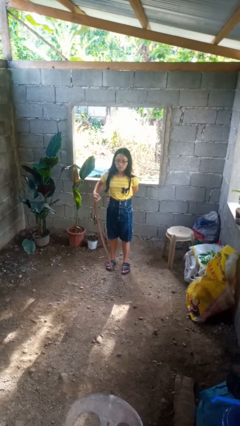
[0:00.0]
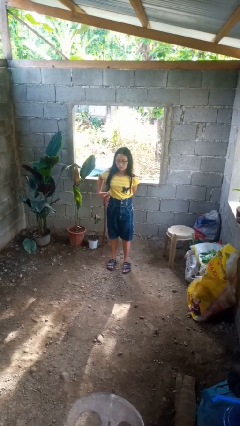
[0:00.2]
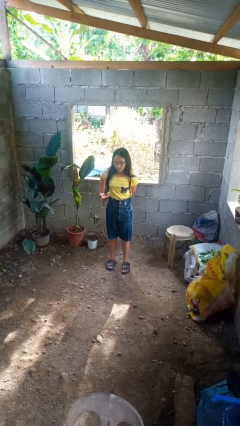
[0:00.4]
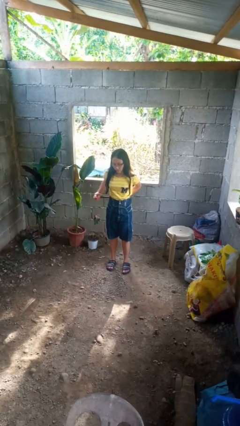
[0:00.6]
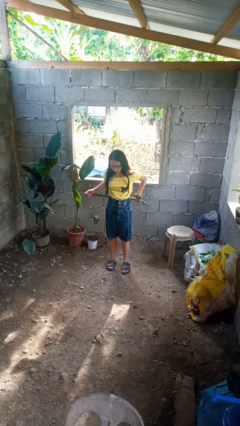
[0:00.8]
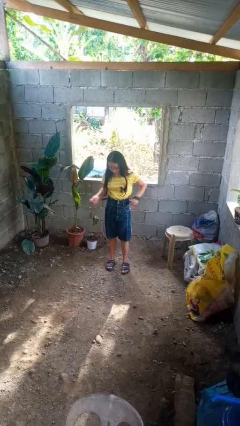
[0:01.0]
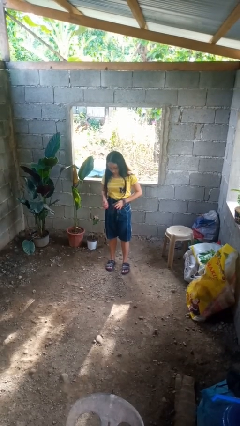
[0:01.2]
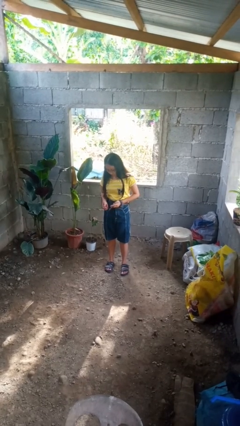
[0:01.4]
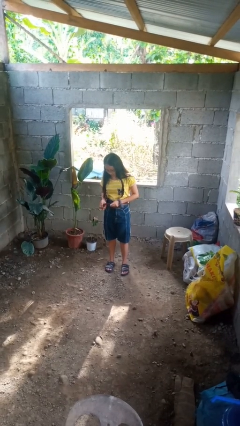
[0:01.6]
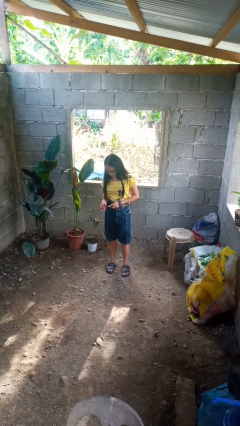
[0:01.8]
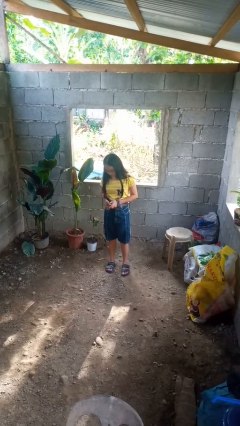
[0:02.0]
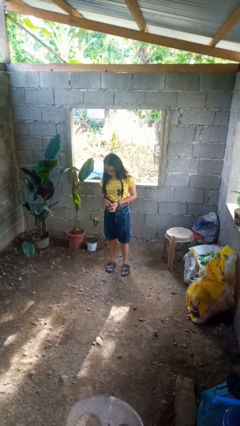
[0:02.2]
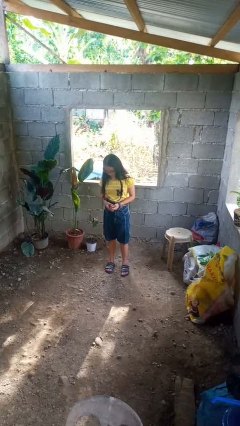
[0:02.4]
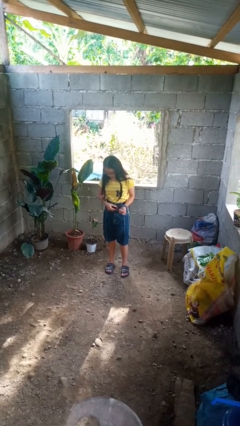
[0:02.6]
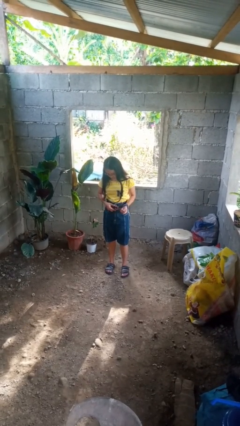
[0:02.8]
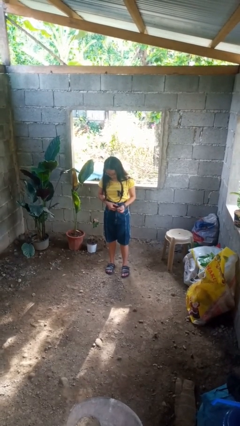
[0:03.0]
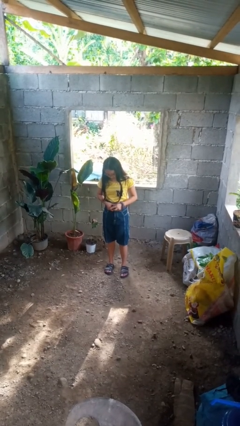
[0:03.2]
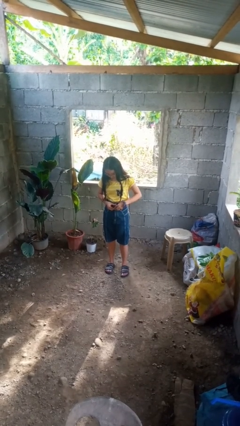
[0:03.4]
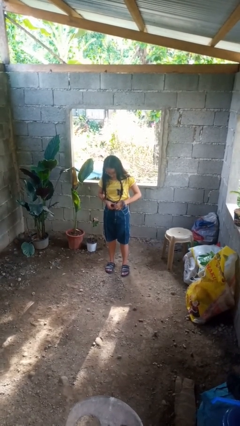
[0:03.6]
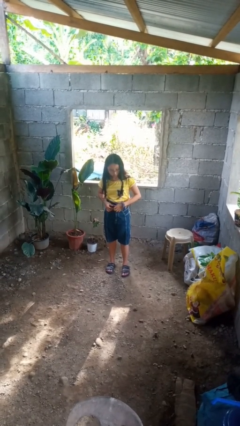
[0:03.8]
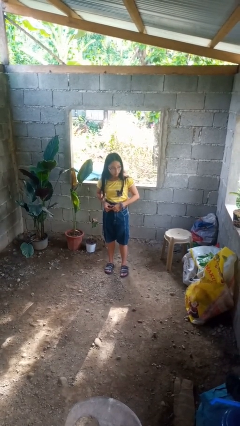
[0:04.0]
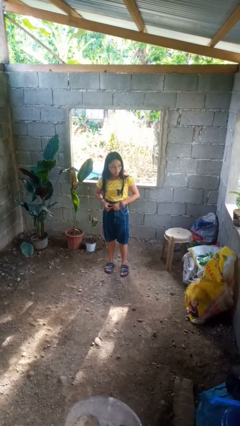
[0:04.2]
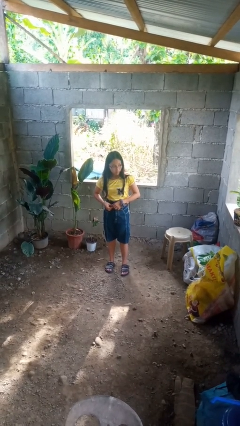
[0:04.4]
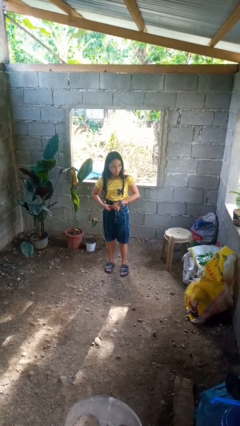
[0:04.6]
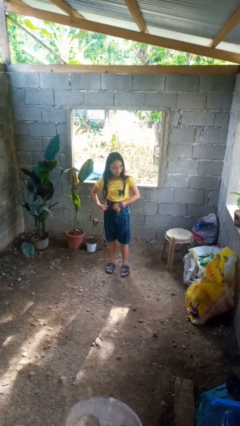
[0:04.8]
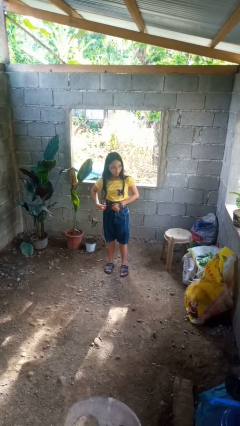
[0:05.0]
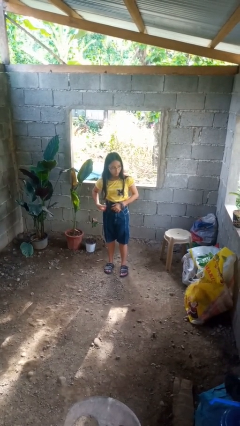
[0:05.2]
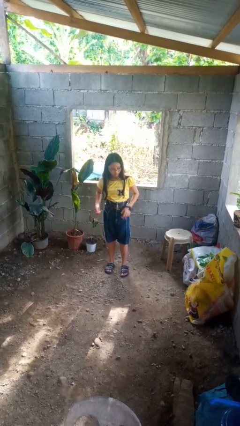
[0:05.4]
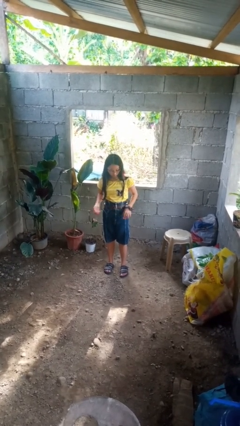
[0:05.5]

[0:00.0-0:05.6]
person puts on belt

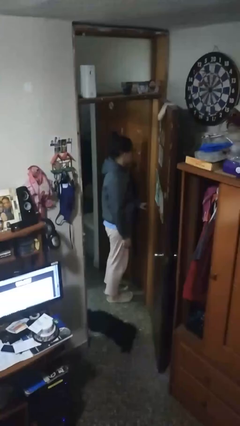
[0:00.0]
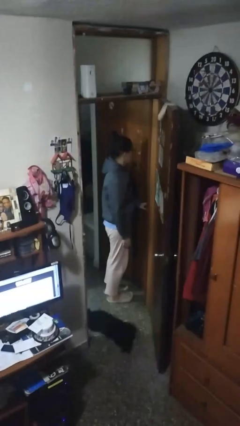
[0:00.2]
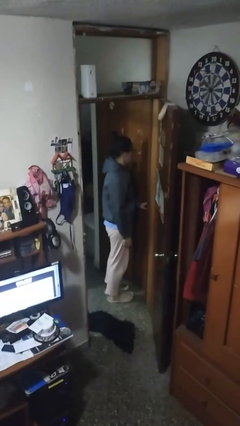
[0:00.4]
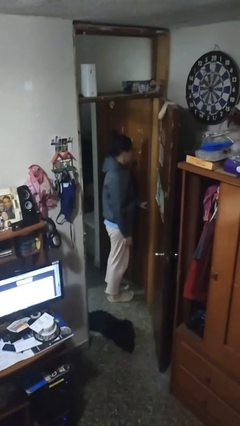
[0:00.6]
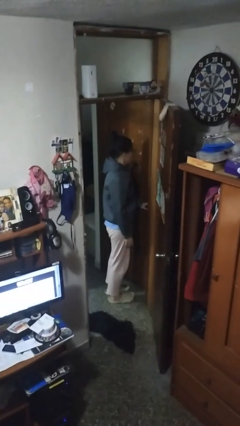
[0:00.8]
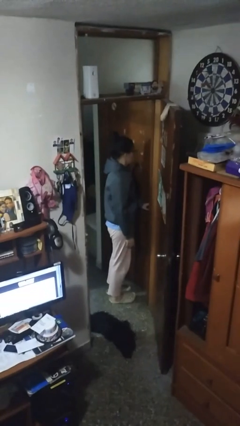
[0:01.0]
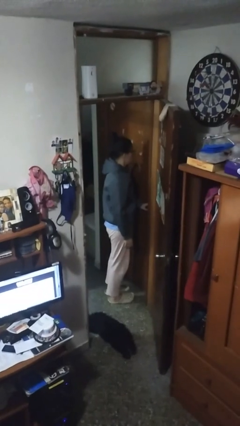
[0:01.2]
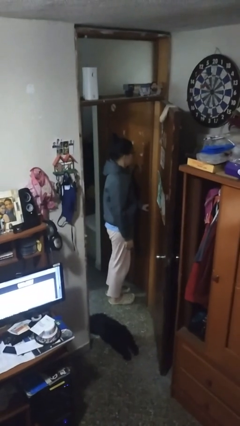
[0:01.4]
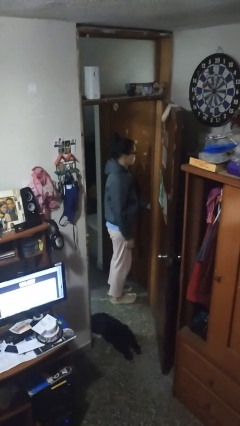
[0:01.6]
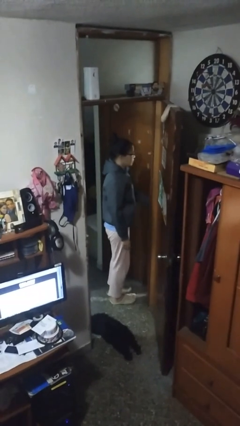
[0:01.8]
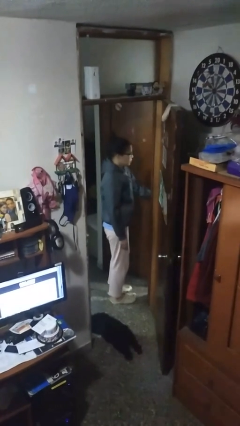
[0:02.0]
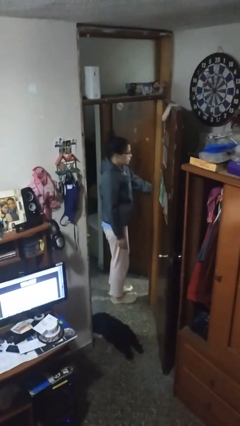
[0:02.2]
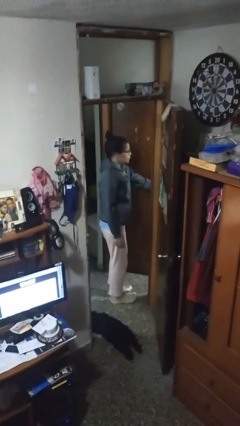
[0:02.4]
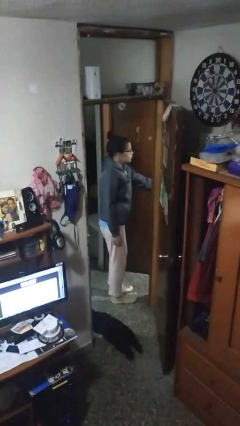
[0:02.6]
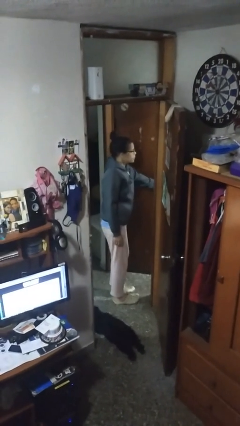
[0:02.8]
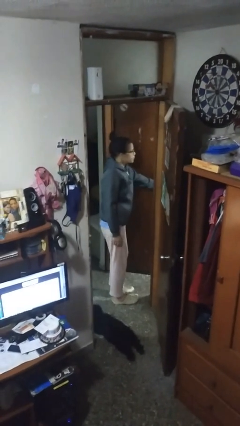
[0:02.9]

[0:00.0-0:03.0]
person opens facility door

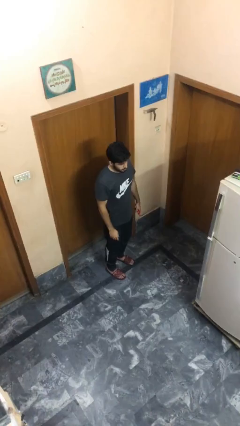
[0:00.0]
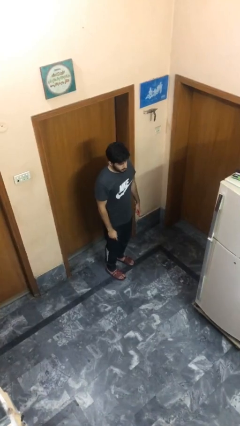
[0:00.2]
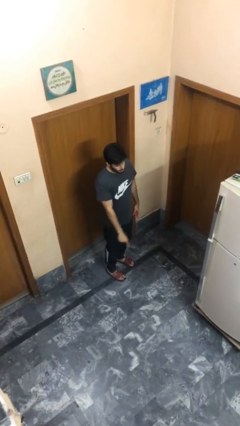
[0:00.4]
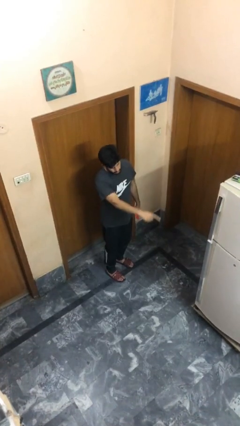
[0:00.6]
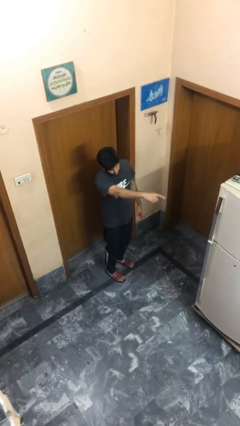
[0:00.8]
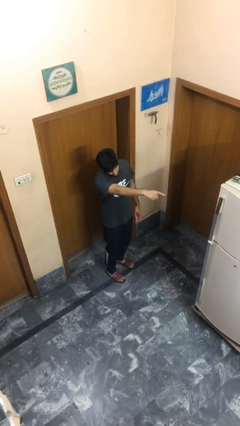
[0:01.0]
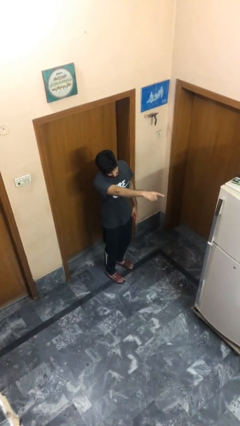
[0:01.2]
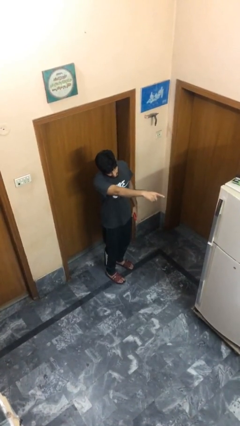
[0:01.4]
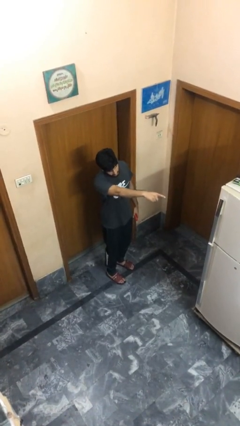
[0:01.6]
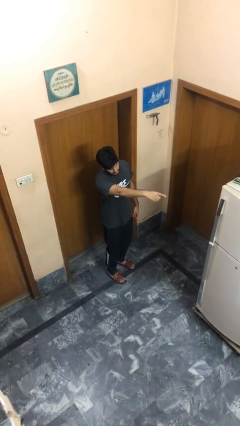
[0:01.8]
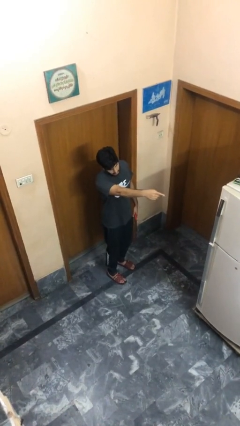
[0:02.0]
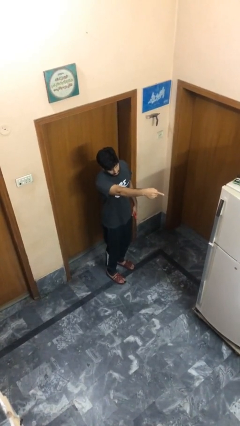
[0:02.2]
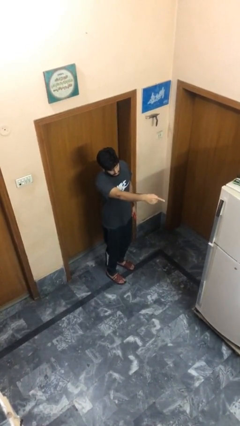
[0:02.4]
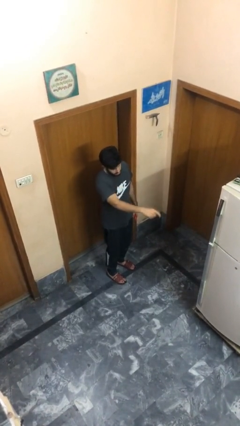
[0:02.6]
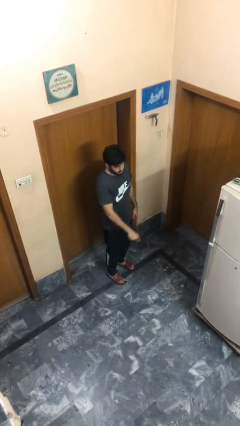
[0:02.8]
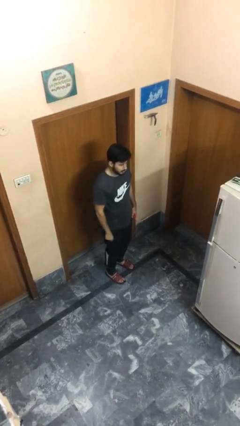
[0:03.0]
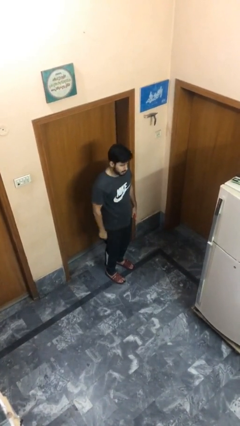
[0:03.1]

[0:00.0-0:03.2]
person points at person

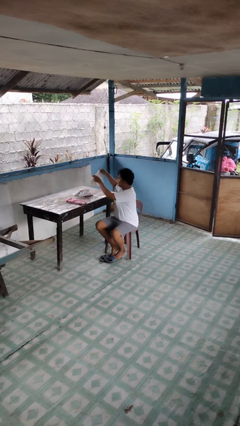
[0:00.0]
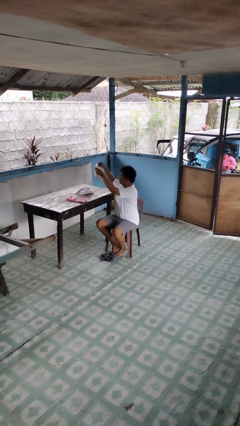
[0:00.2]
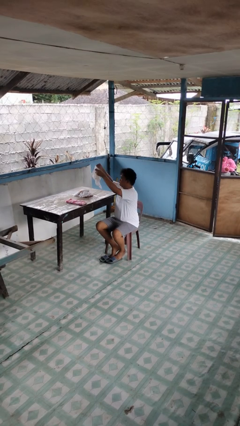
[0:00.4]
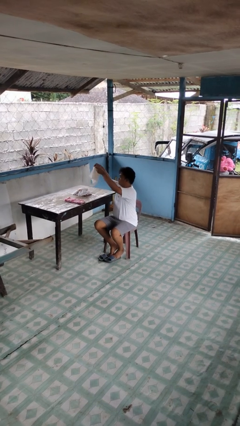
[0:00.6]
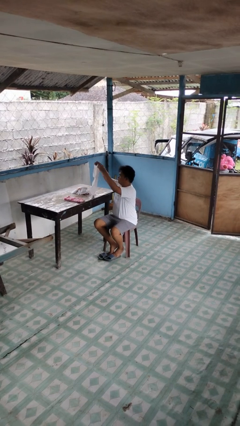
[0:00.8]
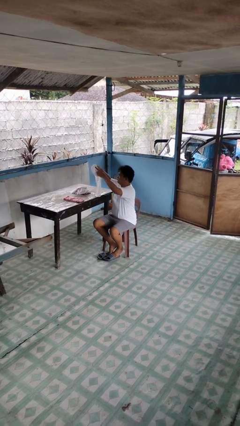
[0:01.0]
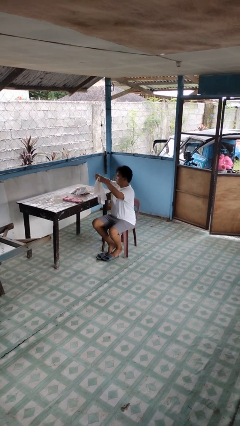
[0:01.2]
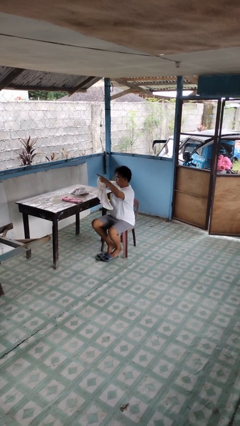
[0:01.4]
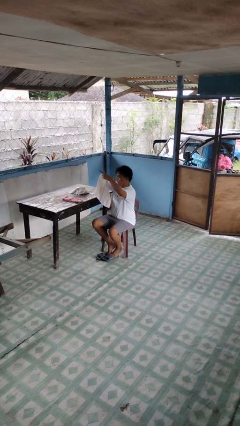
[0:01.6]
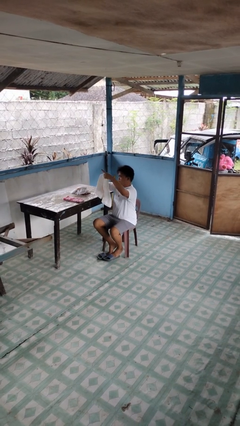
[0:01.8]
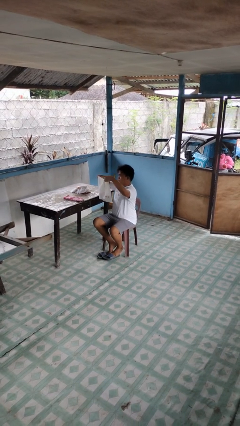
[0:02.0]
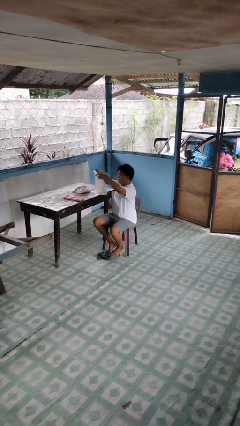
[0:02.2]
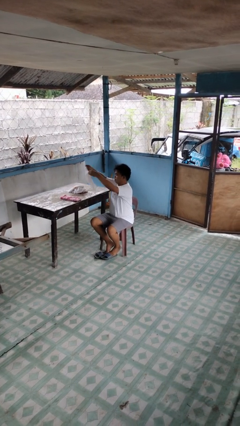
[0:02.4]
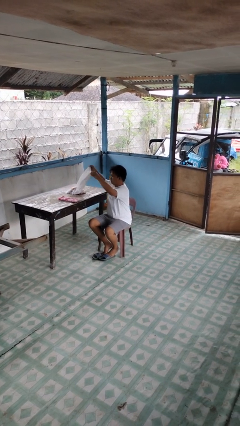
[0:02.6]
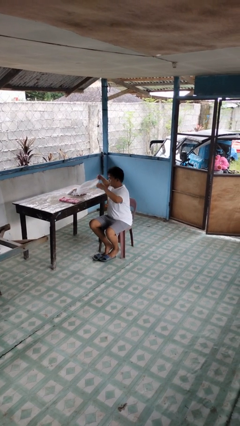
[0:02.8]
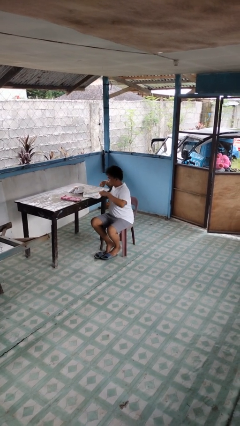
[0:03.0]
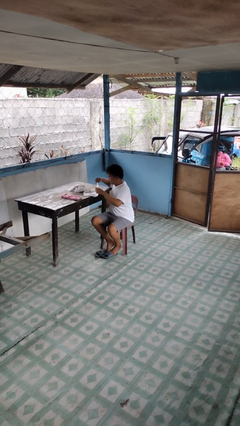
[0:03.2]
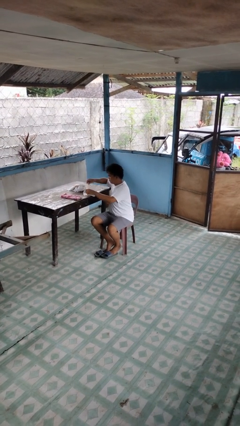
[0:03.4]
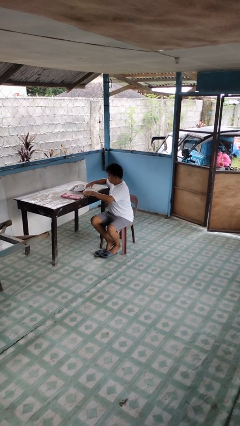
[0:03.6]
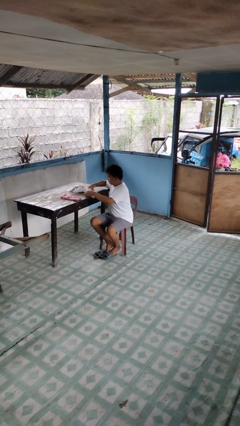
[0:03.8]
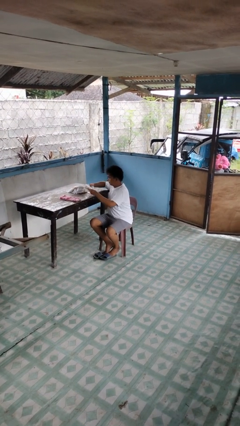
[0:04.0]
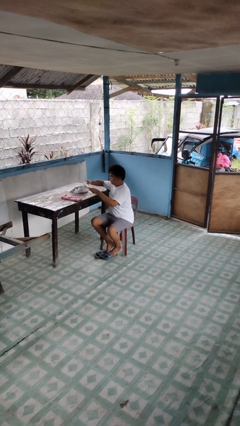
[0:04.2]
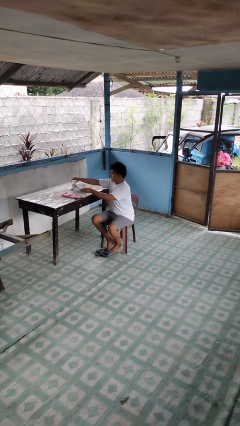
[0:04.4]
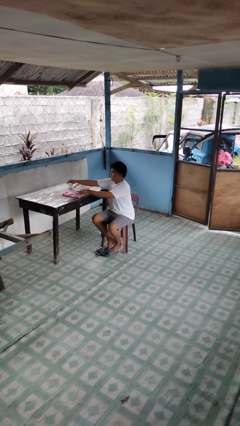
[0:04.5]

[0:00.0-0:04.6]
person folds towel

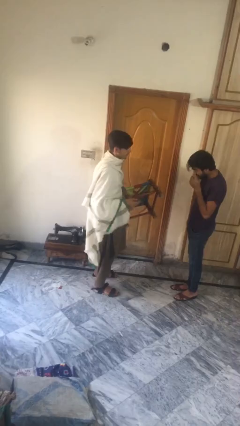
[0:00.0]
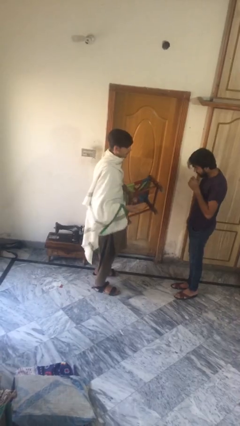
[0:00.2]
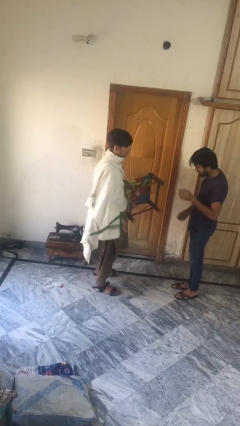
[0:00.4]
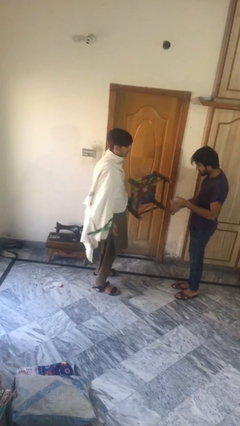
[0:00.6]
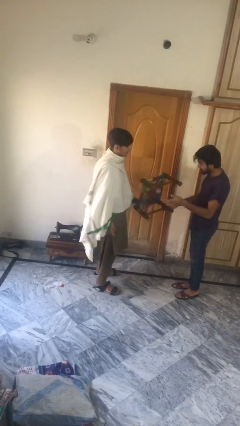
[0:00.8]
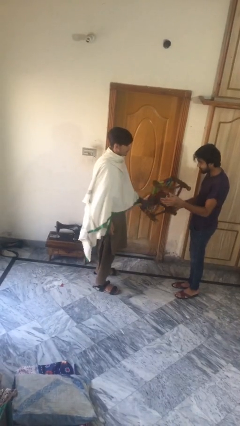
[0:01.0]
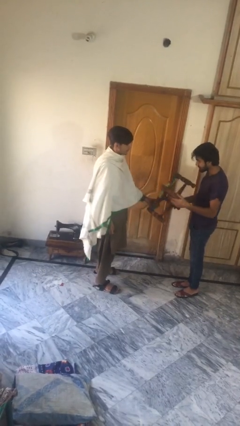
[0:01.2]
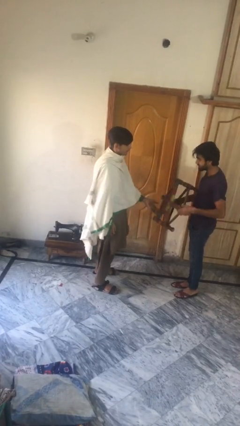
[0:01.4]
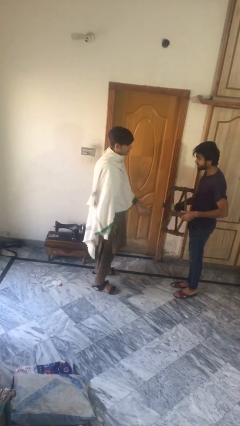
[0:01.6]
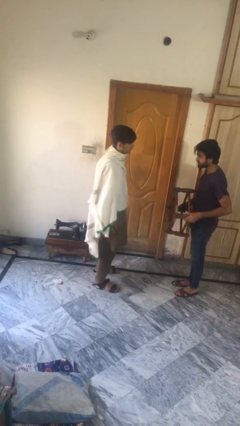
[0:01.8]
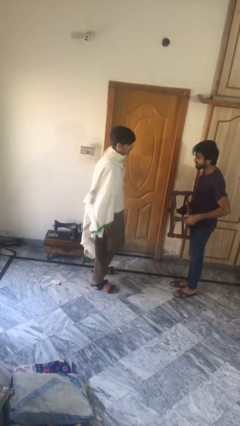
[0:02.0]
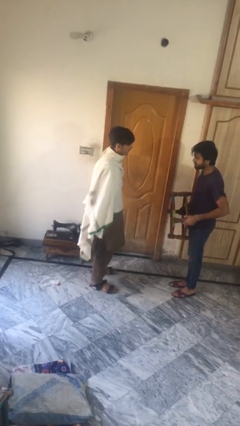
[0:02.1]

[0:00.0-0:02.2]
person transfers object to person
